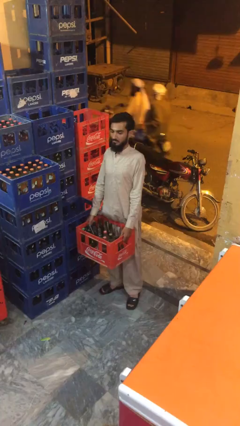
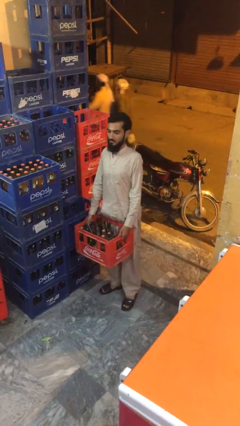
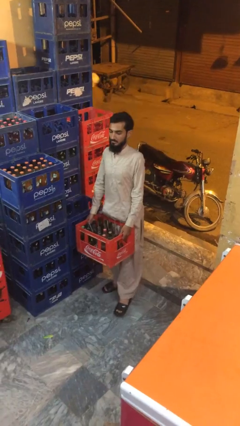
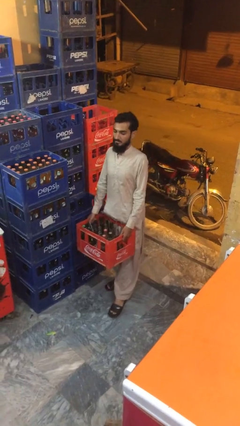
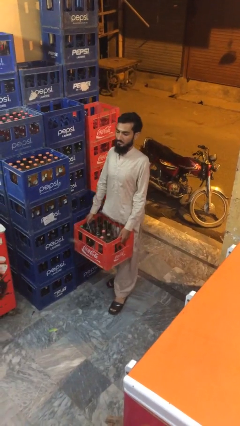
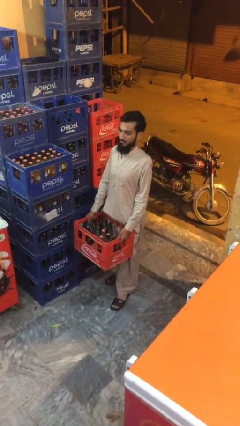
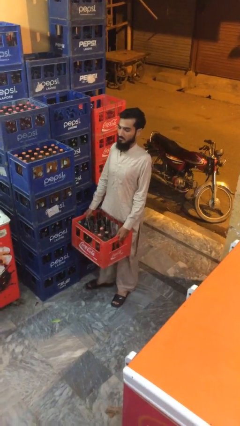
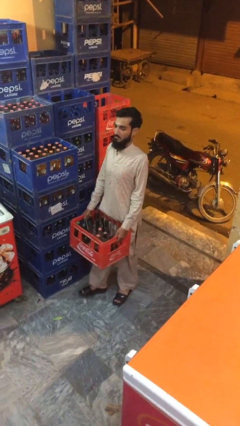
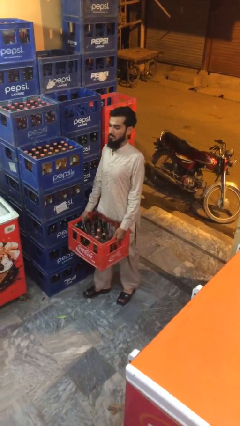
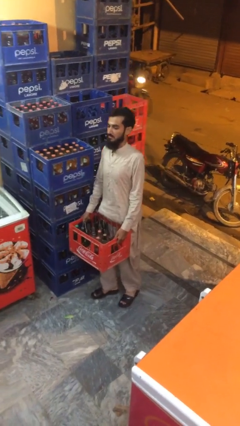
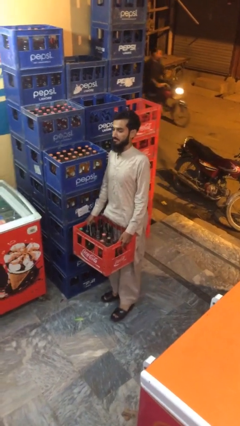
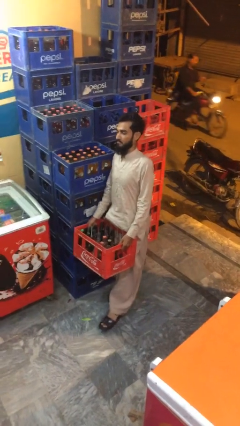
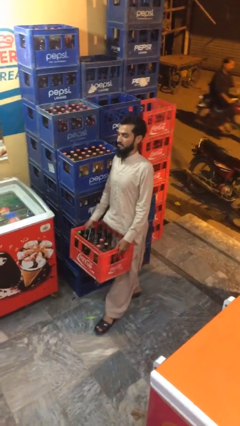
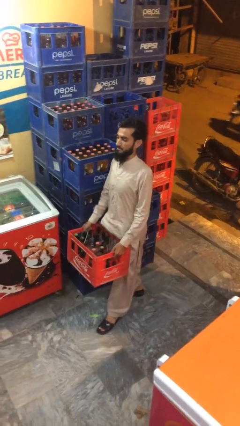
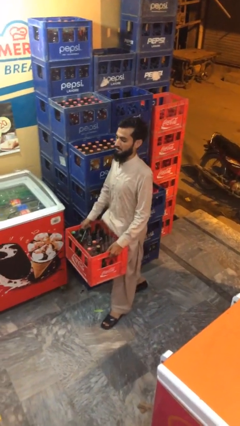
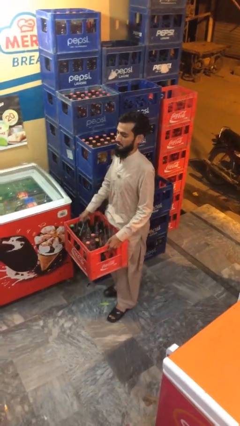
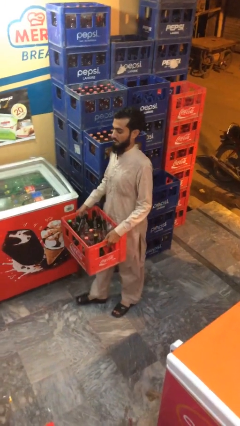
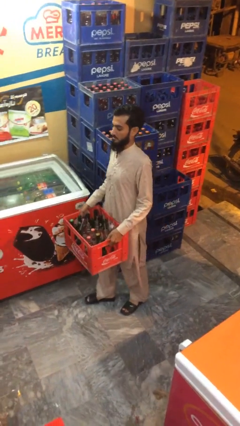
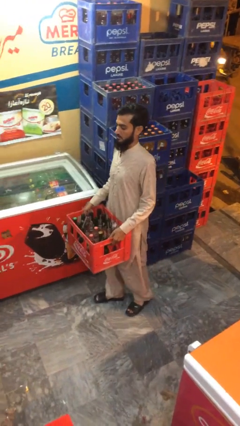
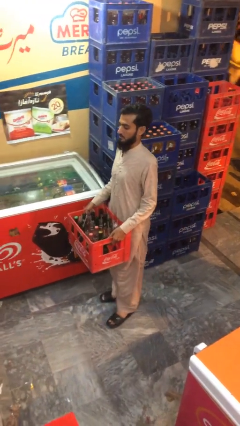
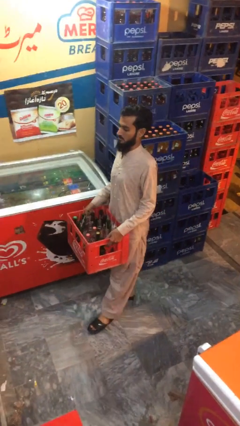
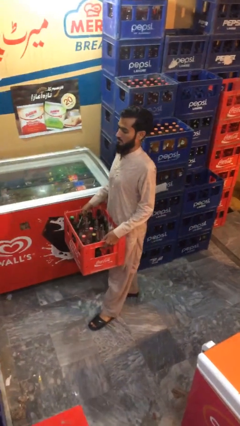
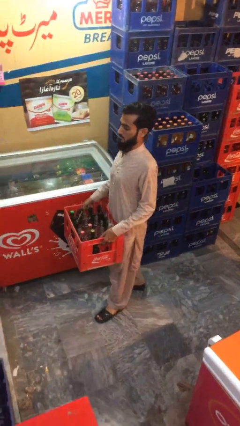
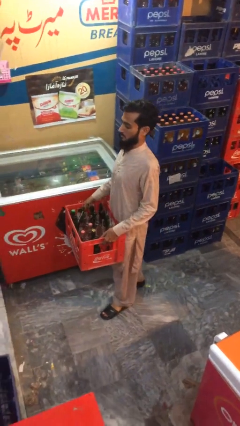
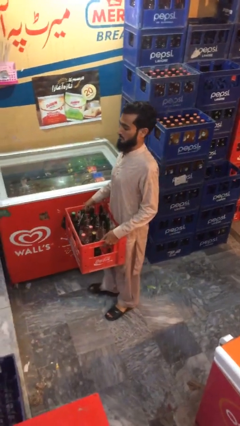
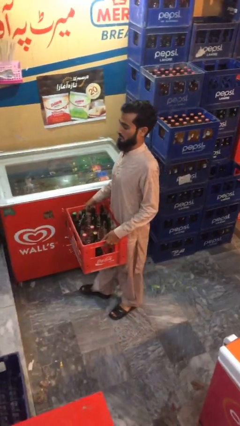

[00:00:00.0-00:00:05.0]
person carries heavy object

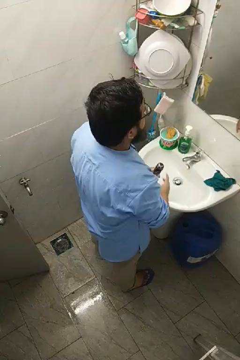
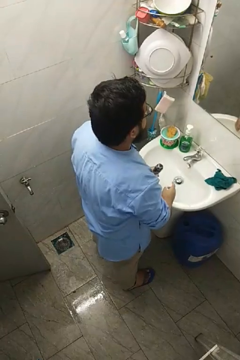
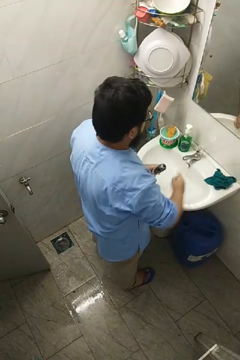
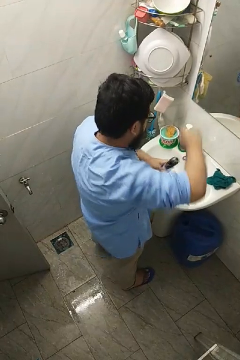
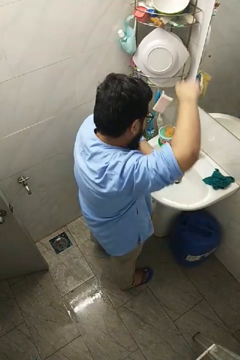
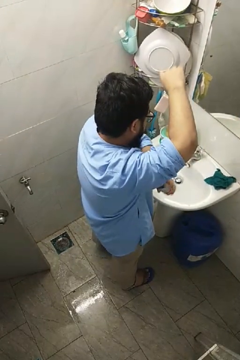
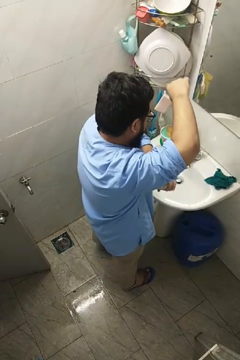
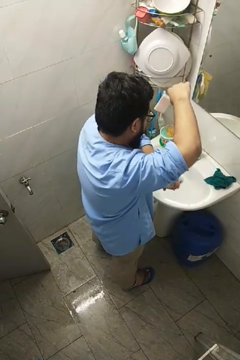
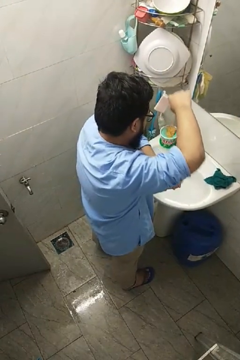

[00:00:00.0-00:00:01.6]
person applies deodorant

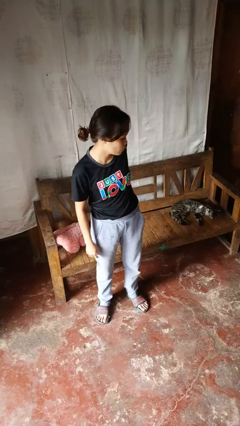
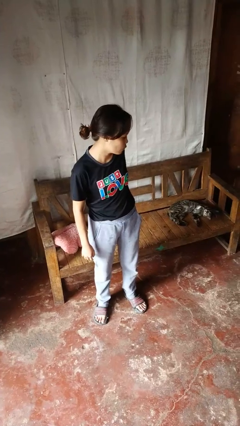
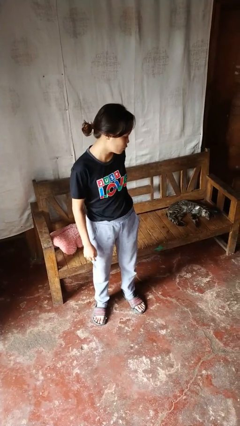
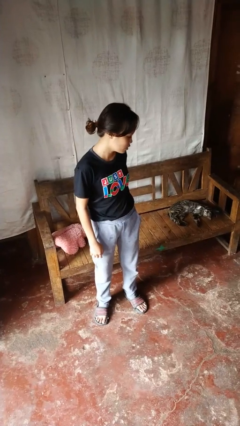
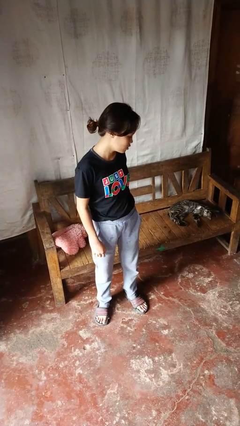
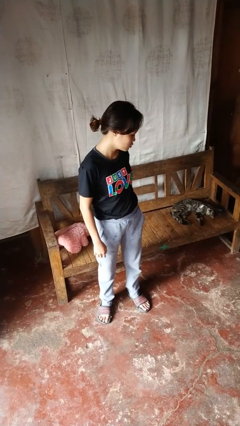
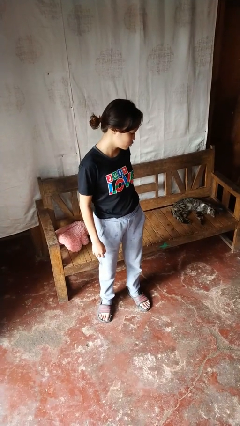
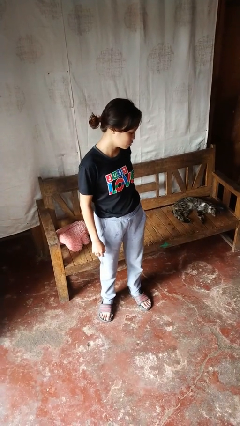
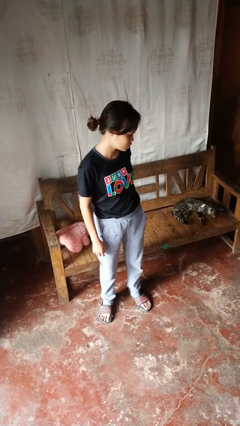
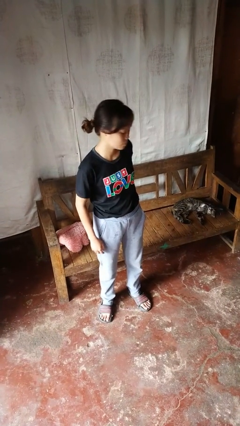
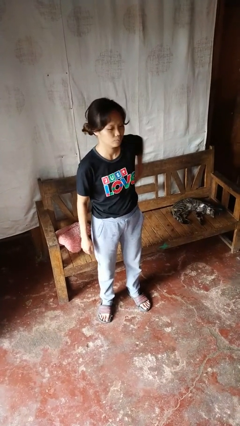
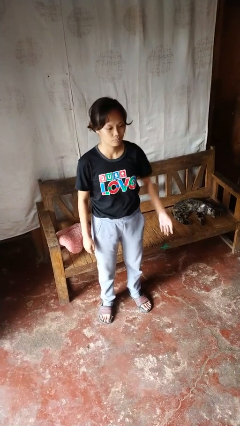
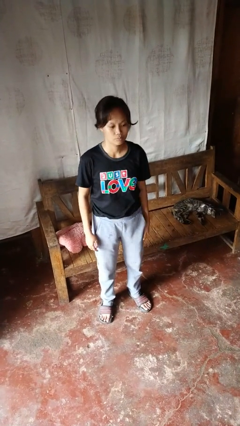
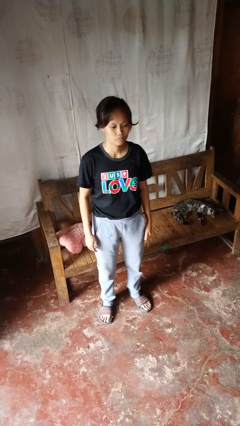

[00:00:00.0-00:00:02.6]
person puts hands in back pockets

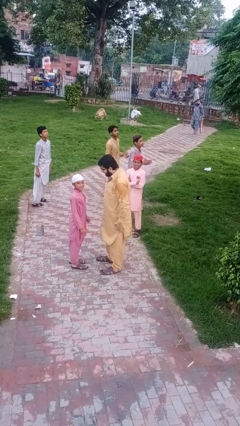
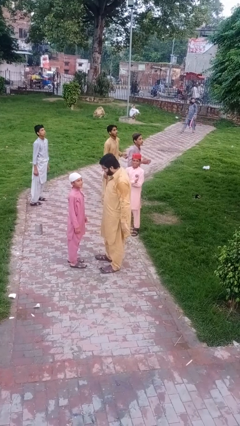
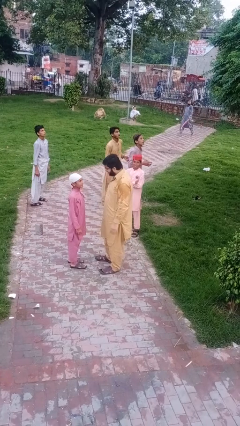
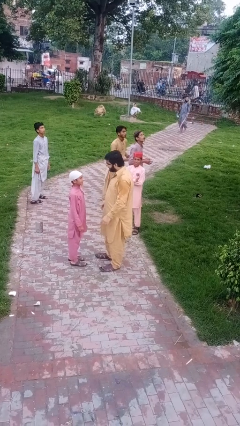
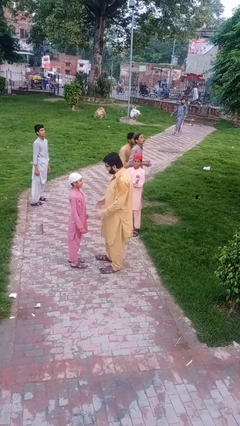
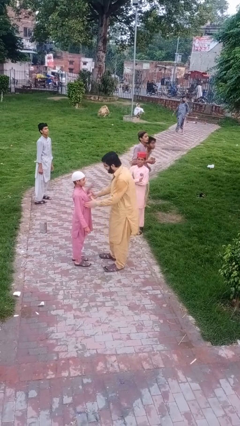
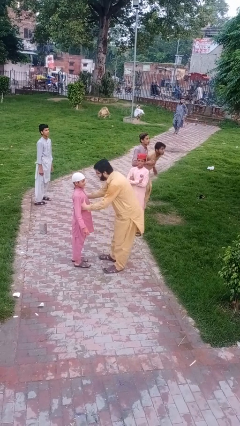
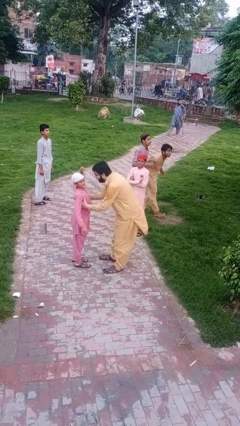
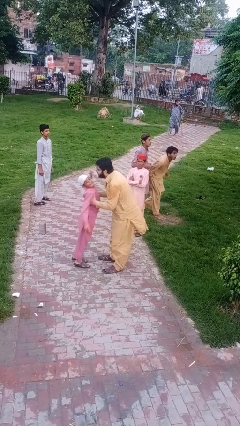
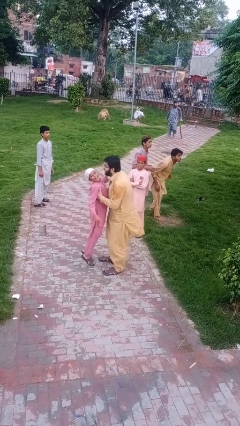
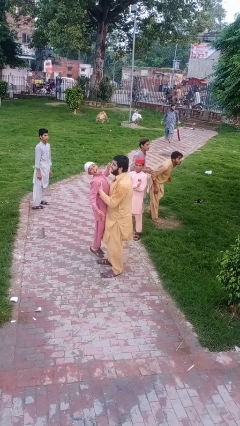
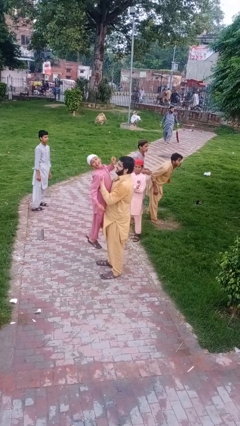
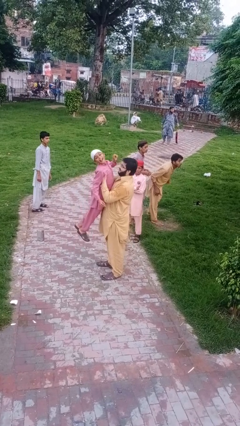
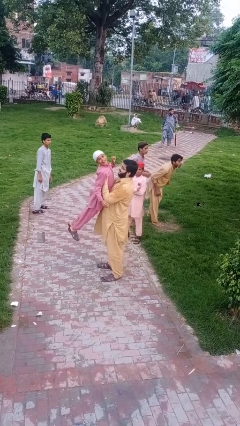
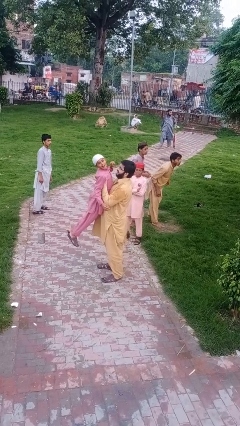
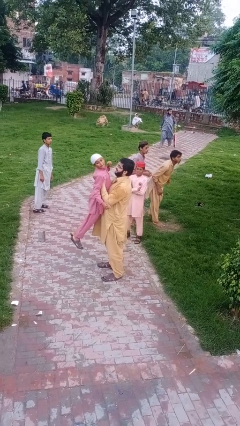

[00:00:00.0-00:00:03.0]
person picks up person

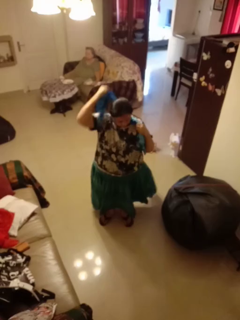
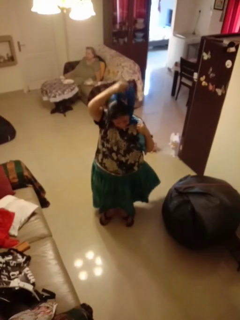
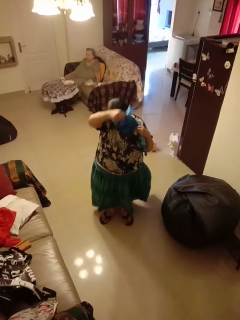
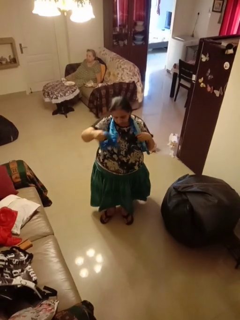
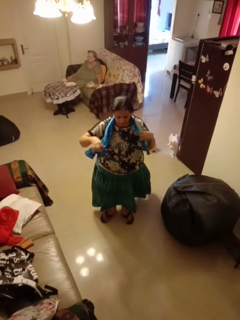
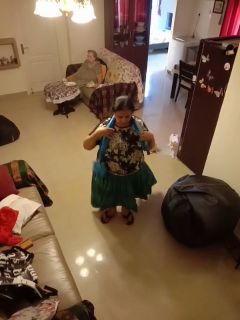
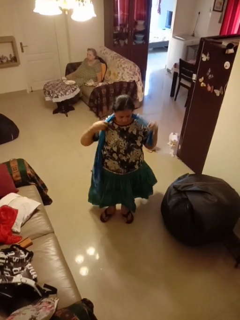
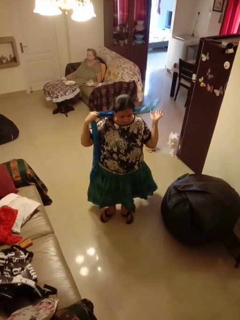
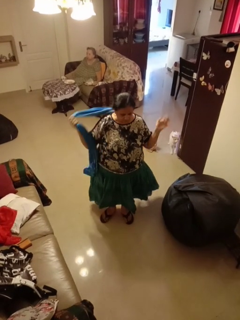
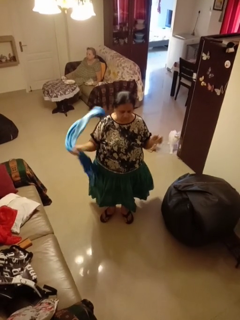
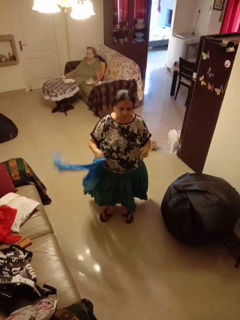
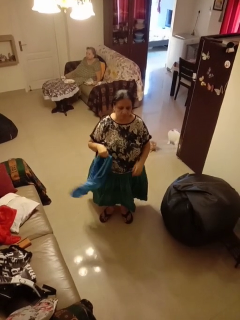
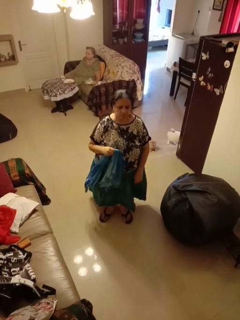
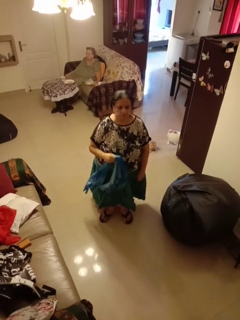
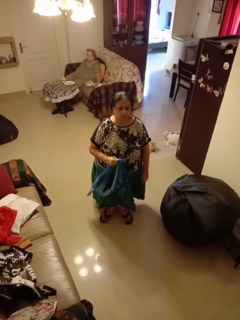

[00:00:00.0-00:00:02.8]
person takes off scarf

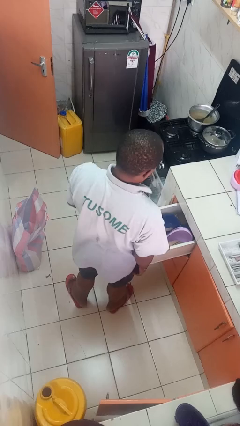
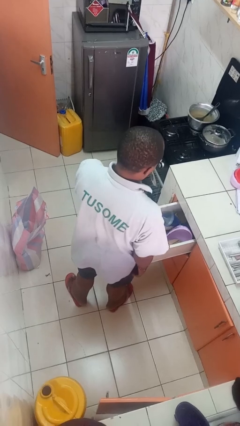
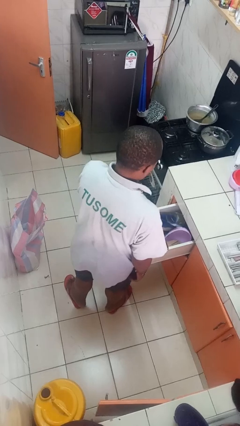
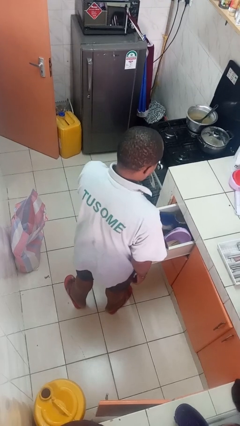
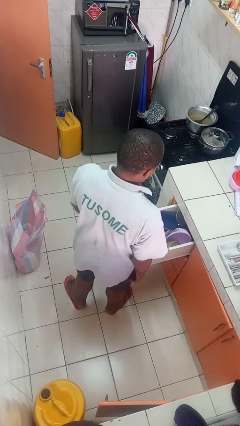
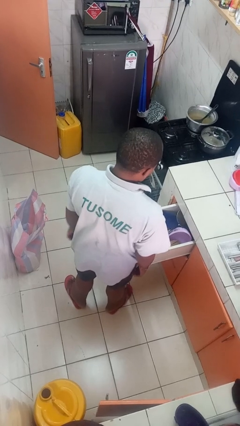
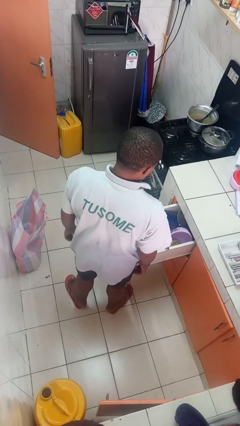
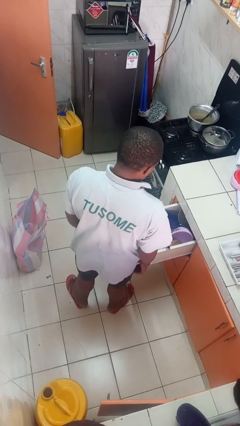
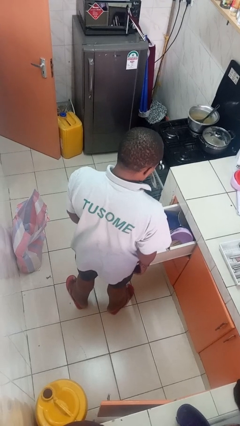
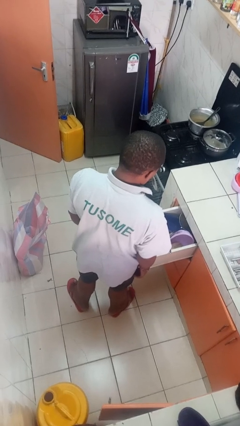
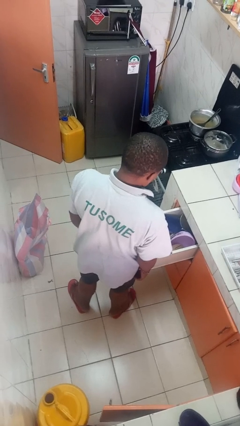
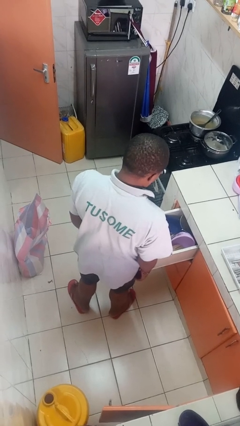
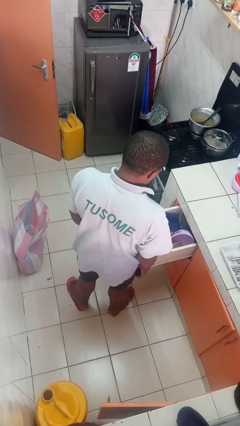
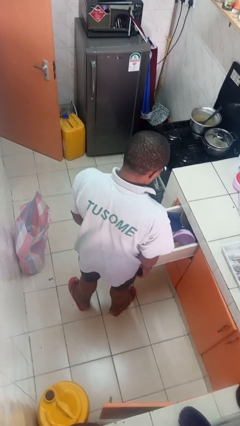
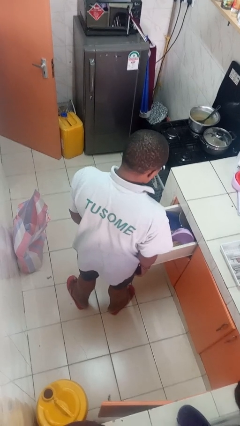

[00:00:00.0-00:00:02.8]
person puts object into kitchen drawer

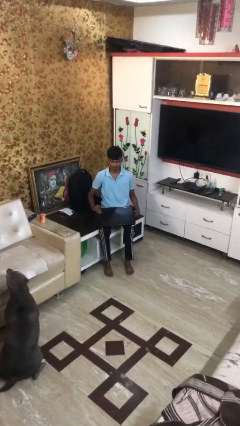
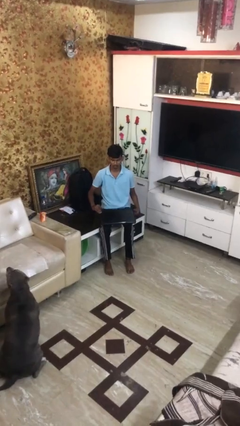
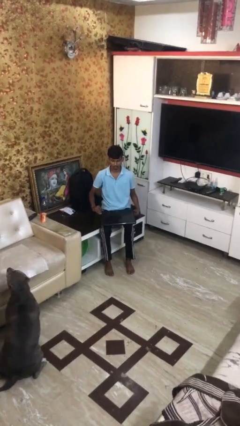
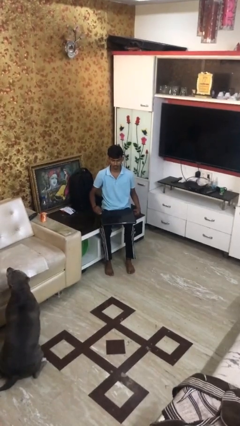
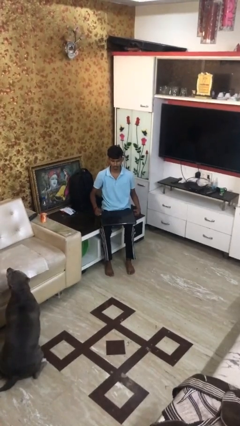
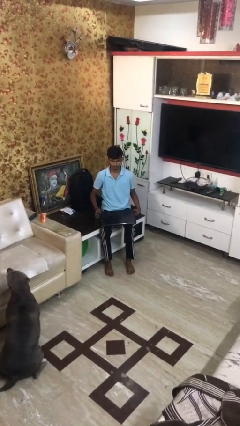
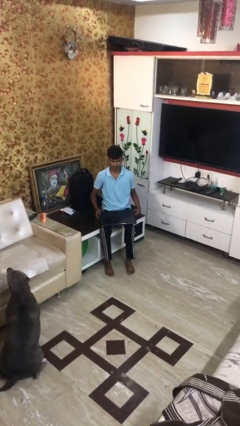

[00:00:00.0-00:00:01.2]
person closes laptop
